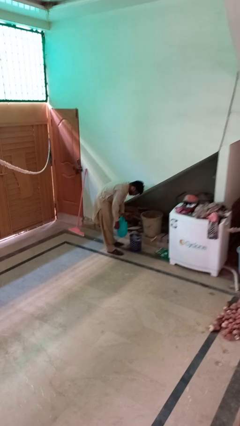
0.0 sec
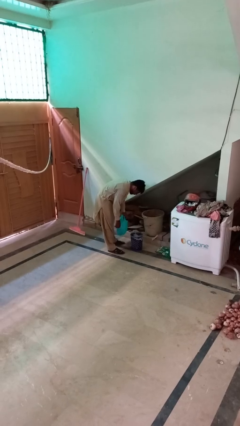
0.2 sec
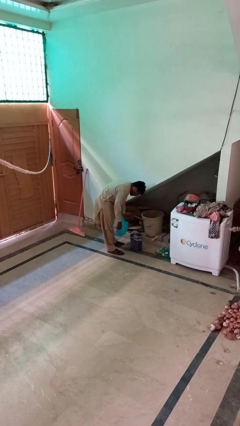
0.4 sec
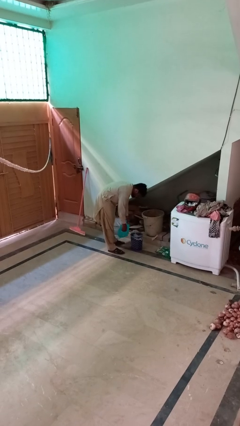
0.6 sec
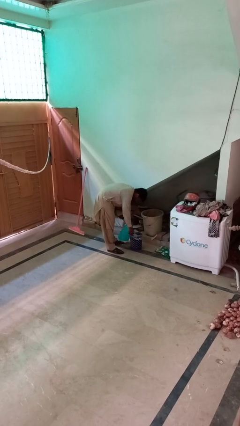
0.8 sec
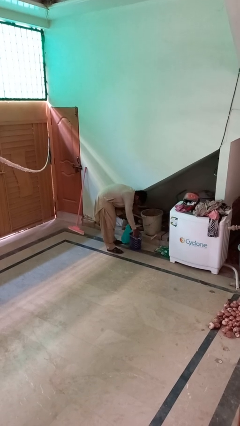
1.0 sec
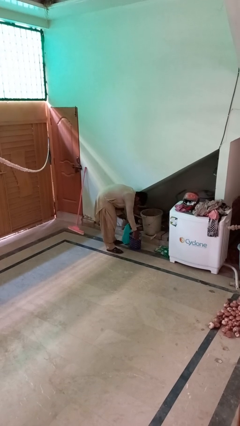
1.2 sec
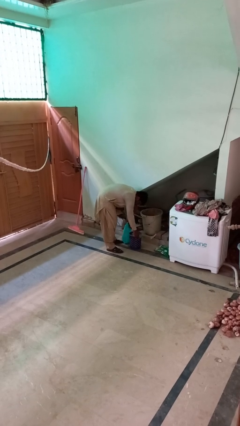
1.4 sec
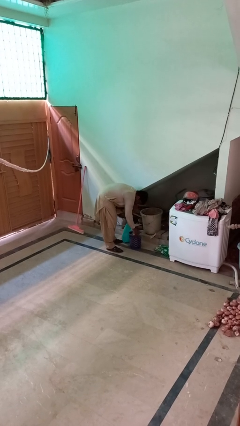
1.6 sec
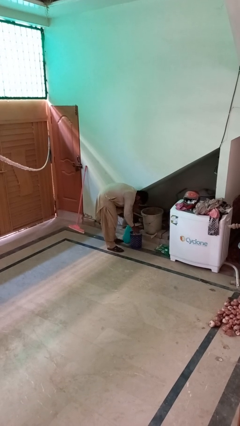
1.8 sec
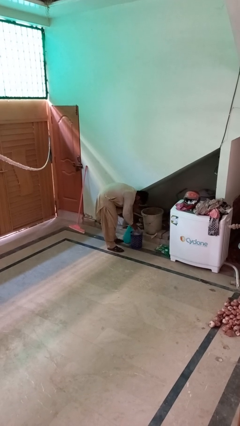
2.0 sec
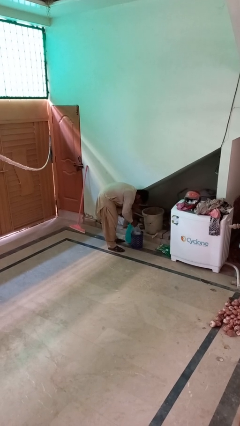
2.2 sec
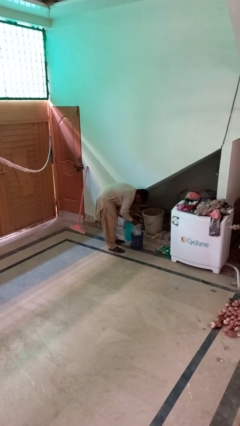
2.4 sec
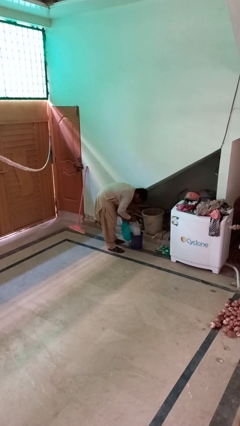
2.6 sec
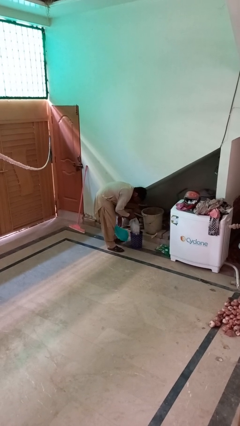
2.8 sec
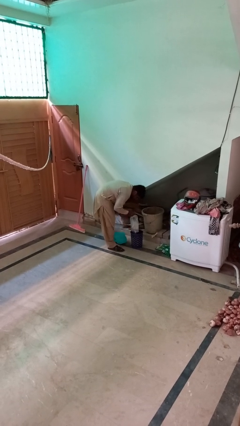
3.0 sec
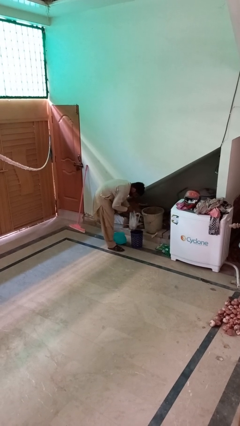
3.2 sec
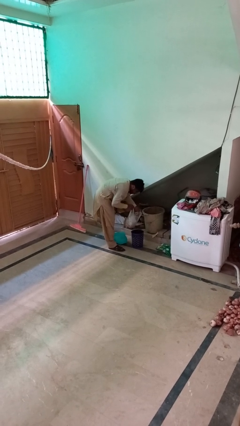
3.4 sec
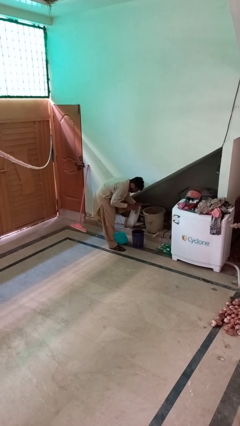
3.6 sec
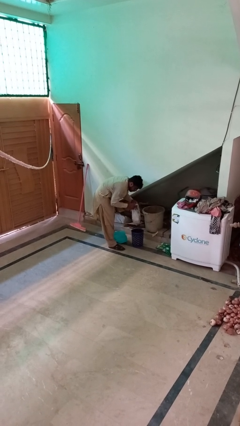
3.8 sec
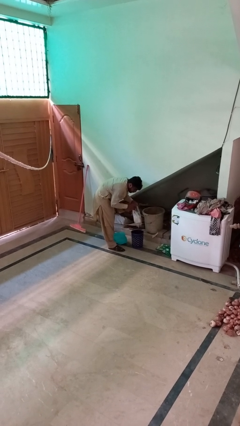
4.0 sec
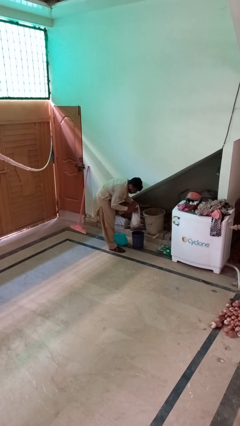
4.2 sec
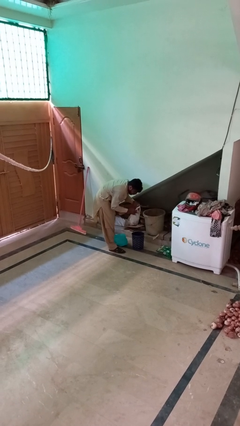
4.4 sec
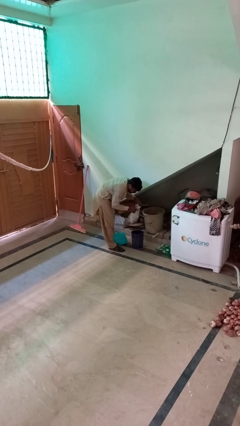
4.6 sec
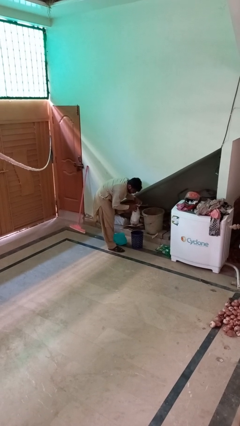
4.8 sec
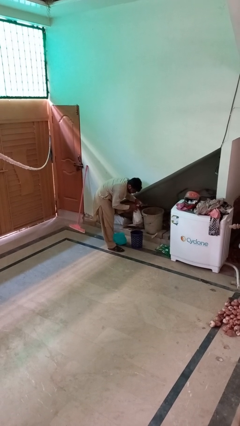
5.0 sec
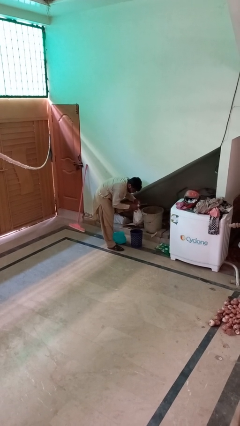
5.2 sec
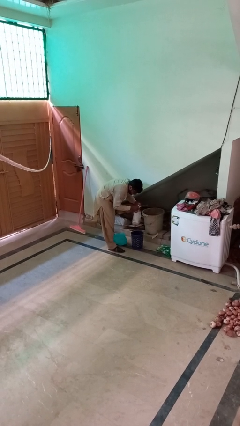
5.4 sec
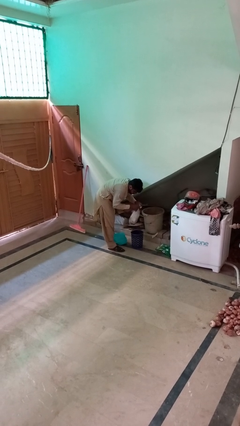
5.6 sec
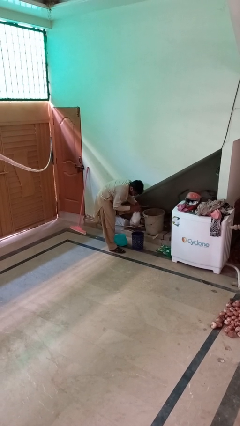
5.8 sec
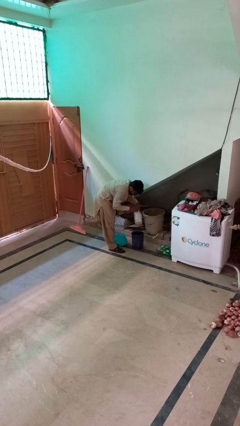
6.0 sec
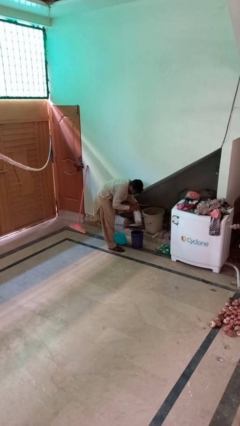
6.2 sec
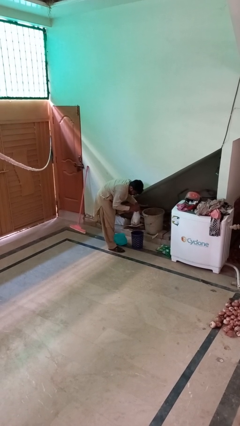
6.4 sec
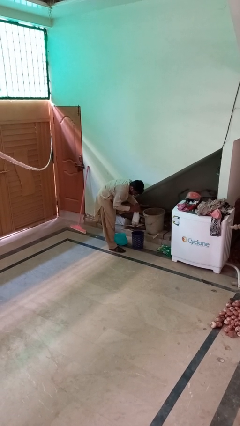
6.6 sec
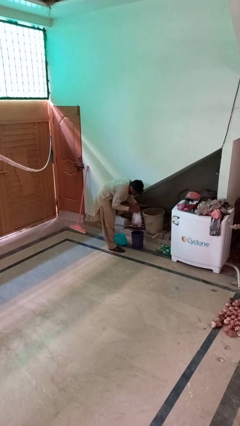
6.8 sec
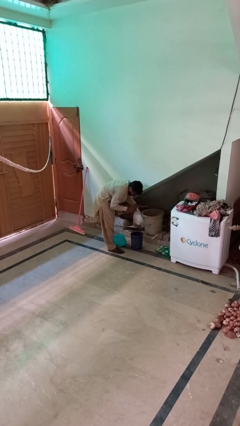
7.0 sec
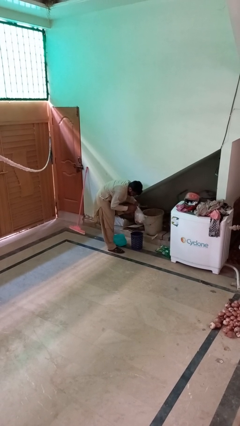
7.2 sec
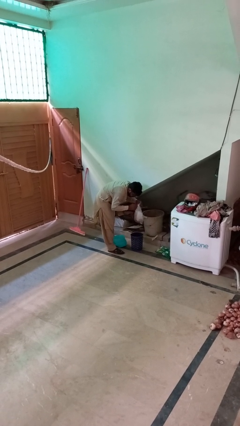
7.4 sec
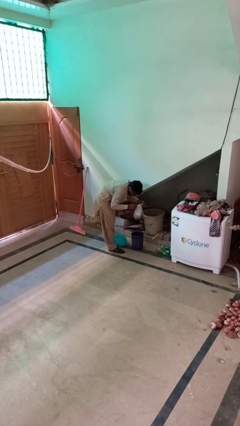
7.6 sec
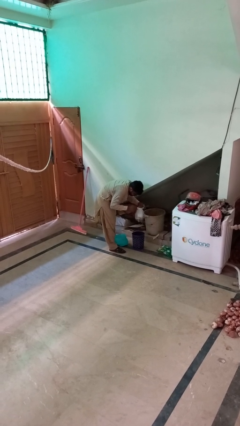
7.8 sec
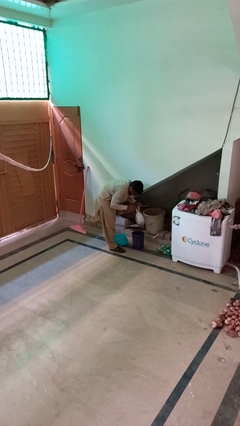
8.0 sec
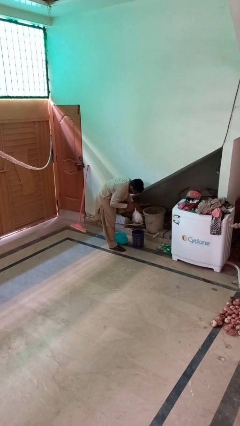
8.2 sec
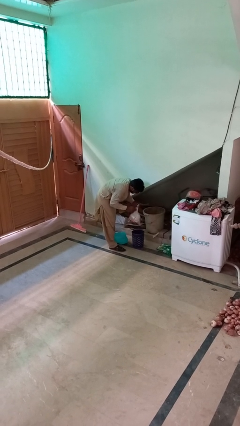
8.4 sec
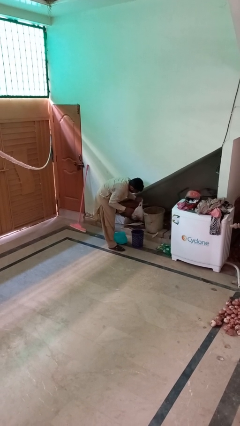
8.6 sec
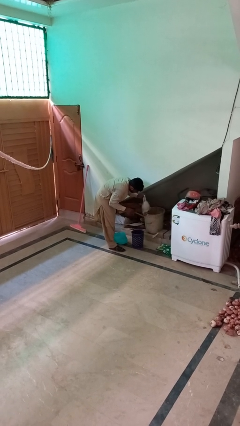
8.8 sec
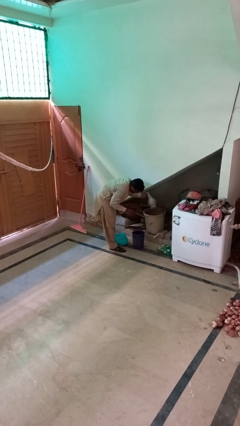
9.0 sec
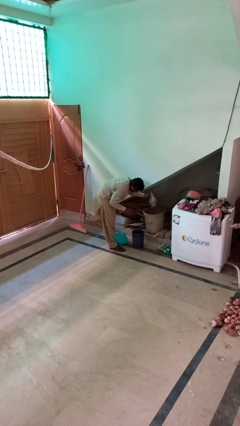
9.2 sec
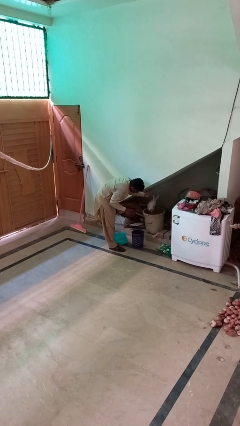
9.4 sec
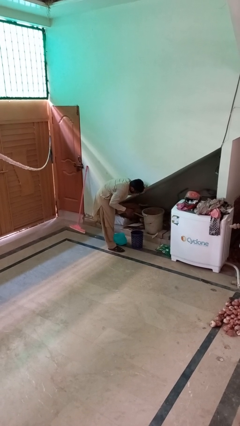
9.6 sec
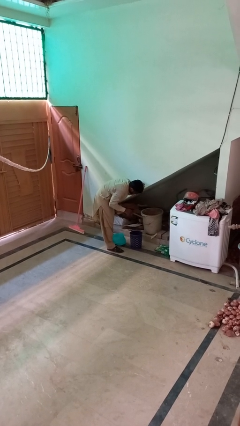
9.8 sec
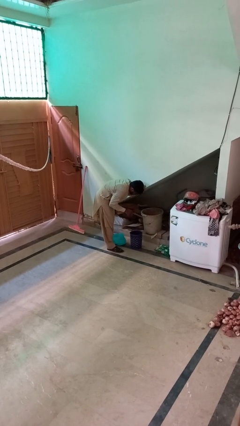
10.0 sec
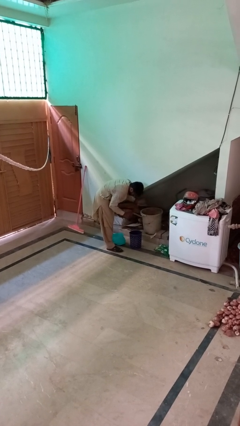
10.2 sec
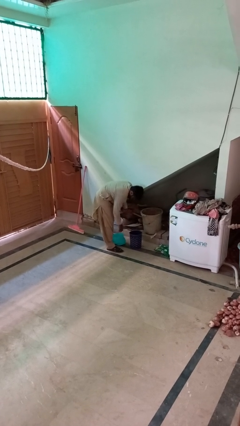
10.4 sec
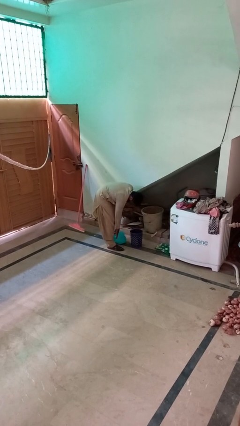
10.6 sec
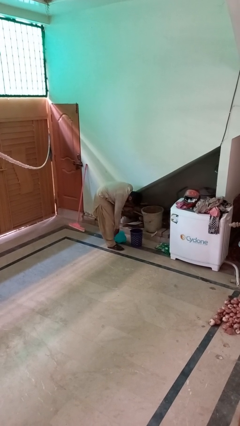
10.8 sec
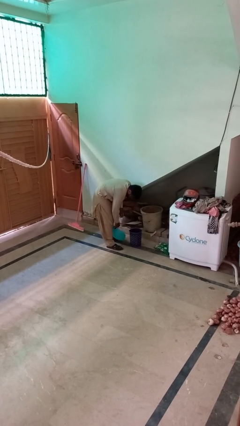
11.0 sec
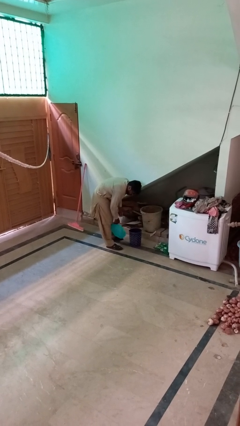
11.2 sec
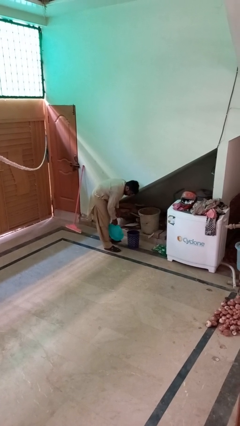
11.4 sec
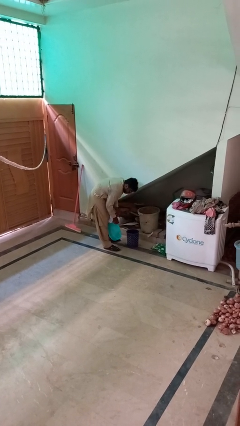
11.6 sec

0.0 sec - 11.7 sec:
person removes trashbag from trashcan

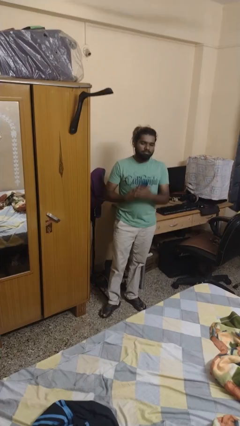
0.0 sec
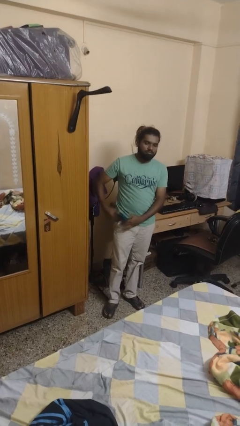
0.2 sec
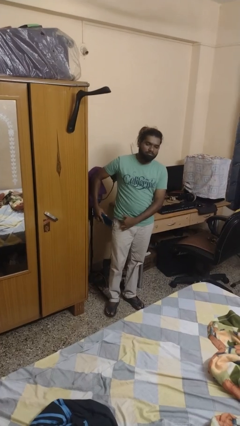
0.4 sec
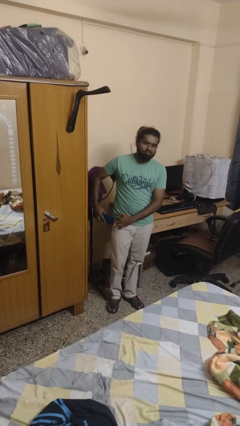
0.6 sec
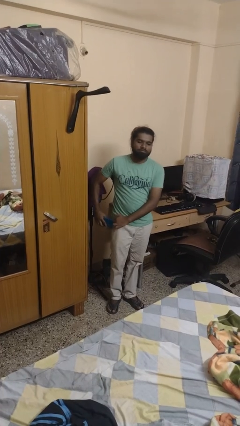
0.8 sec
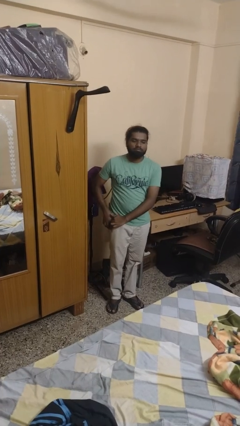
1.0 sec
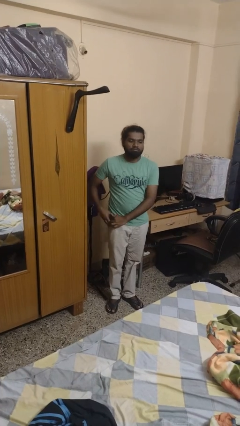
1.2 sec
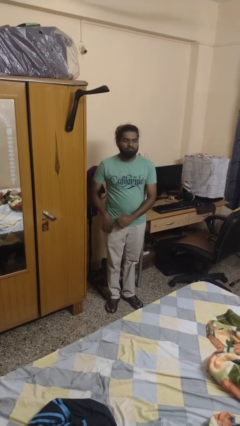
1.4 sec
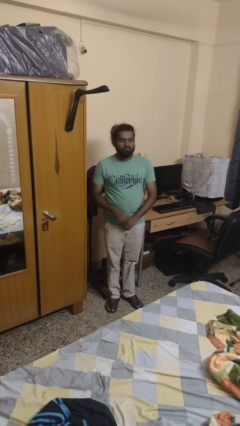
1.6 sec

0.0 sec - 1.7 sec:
person puts phone into pocket

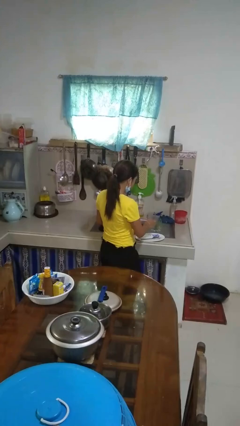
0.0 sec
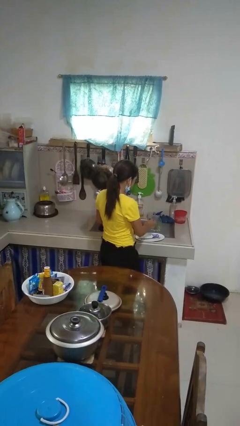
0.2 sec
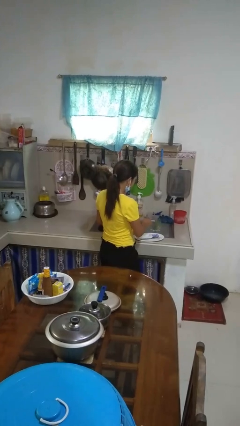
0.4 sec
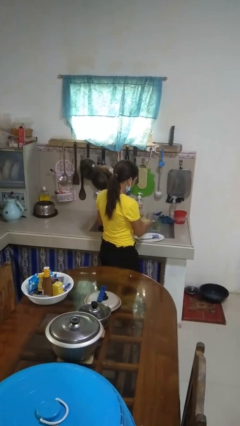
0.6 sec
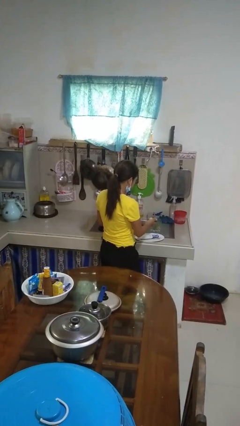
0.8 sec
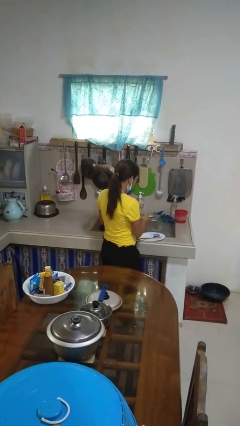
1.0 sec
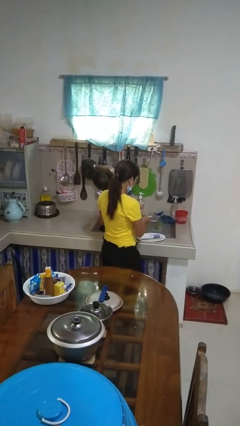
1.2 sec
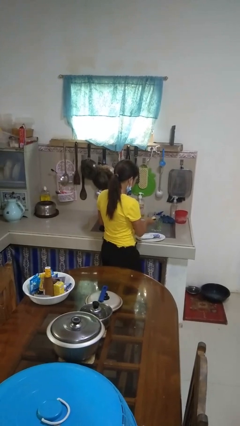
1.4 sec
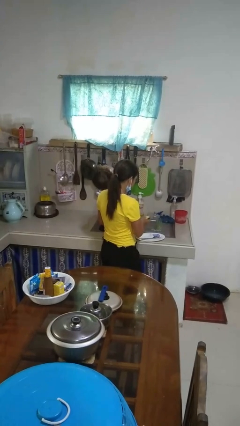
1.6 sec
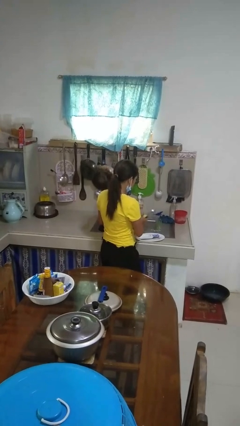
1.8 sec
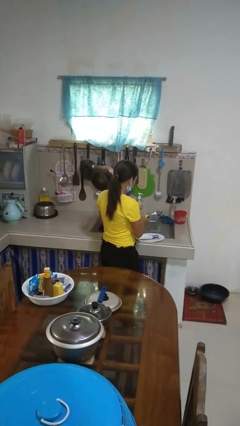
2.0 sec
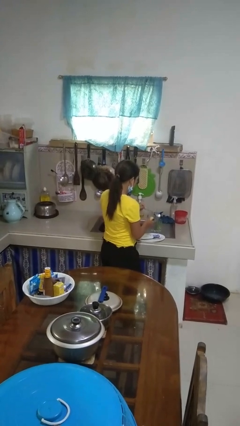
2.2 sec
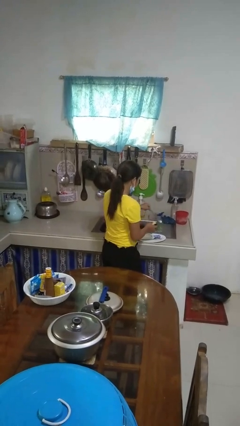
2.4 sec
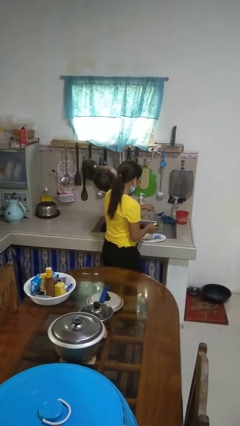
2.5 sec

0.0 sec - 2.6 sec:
person washes dish

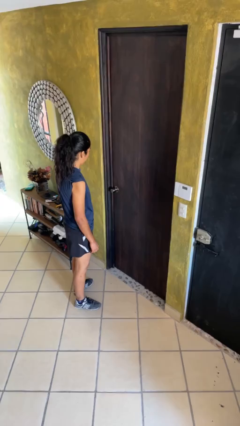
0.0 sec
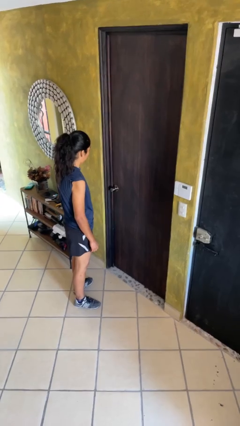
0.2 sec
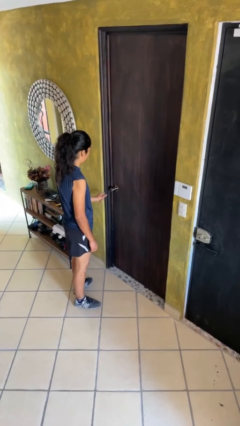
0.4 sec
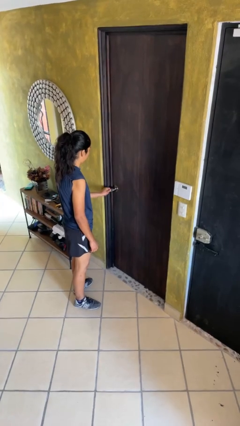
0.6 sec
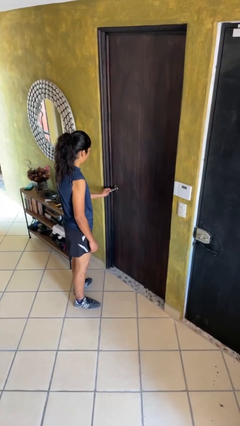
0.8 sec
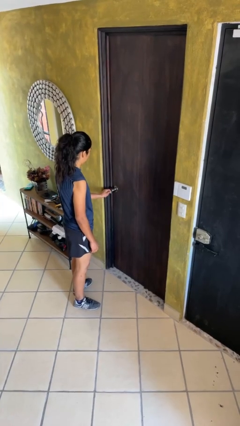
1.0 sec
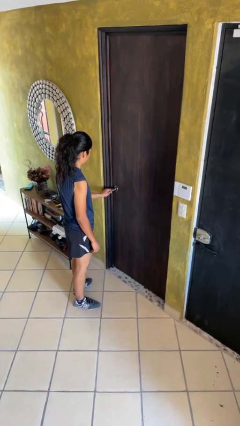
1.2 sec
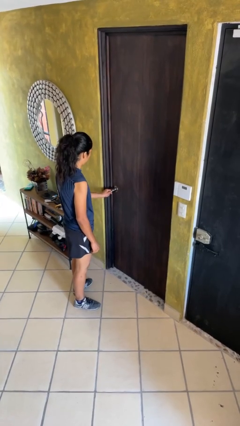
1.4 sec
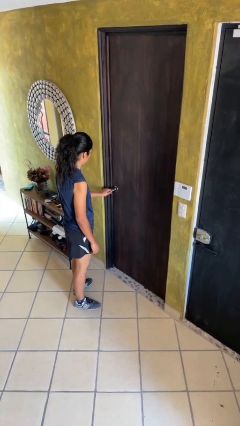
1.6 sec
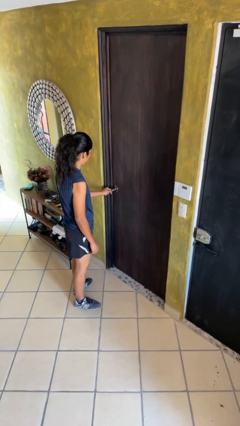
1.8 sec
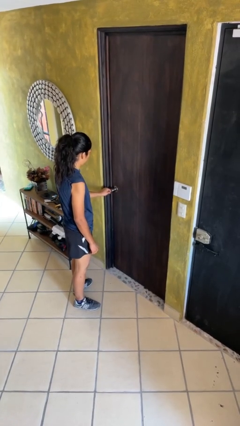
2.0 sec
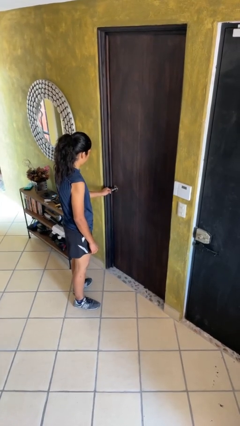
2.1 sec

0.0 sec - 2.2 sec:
person unlocks door with keys
